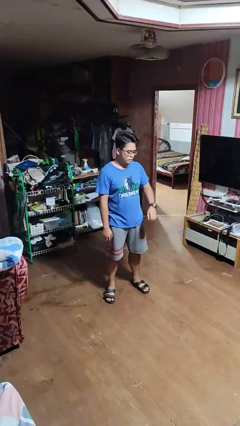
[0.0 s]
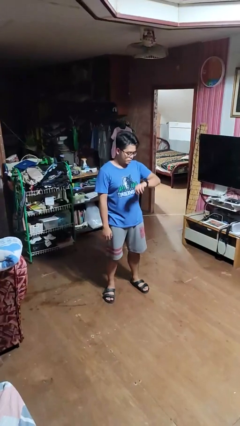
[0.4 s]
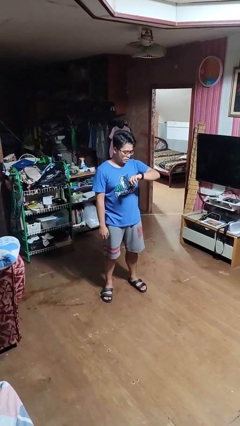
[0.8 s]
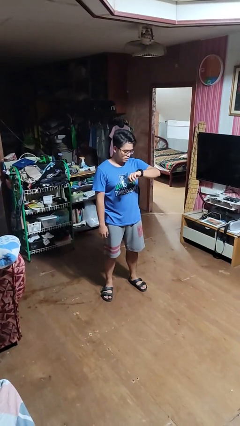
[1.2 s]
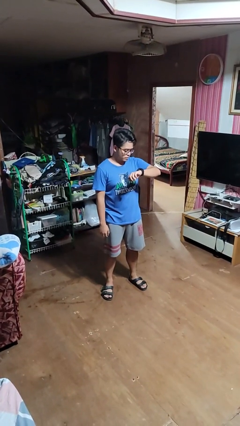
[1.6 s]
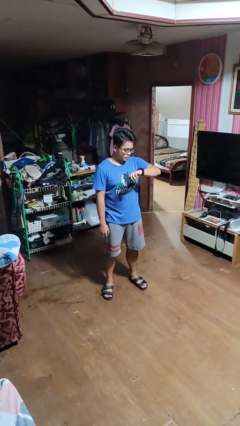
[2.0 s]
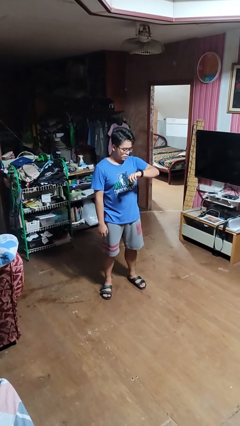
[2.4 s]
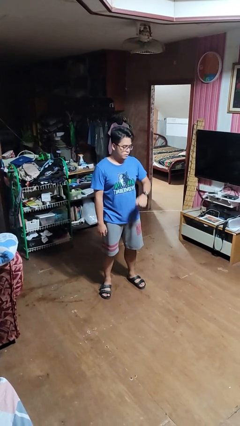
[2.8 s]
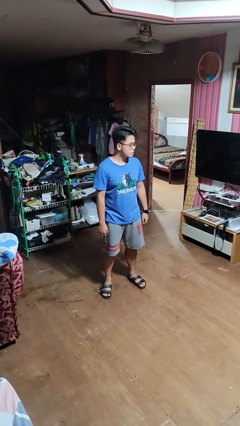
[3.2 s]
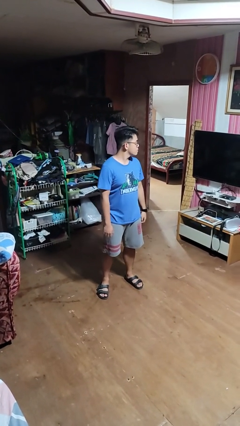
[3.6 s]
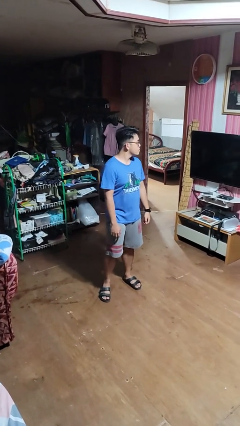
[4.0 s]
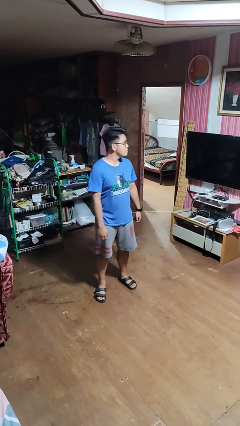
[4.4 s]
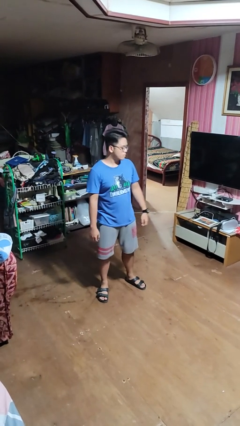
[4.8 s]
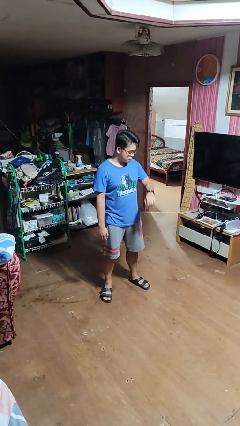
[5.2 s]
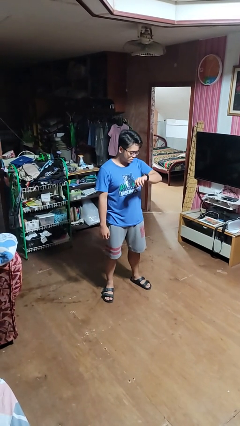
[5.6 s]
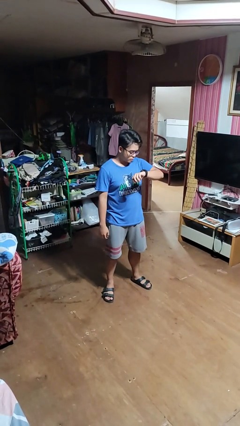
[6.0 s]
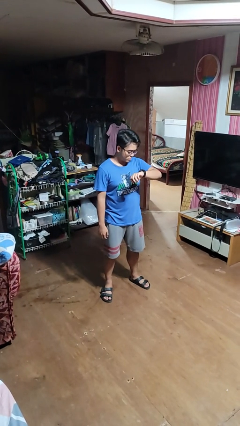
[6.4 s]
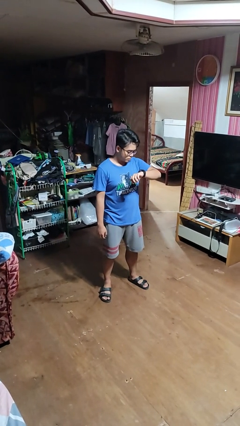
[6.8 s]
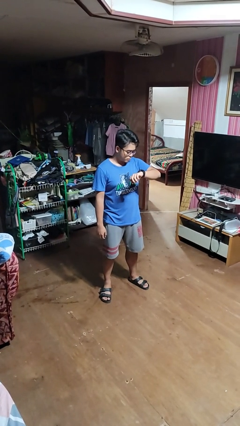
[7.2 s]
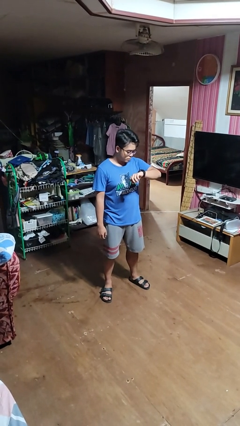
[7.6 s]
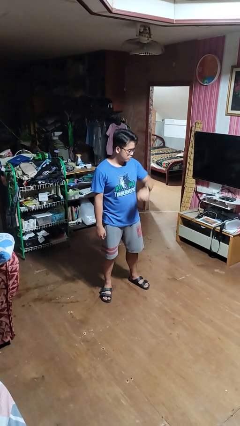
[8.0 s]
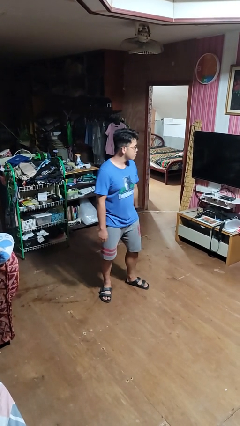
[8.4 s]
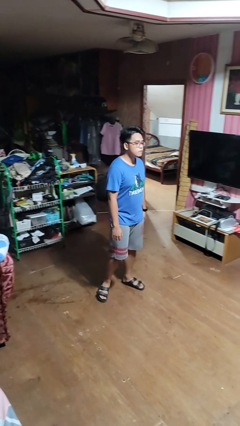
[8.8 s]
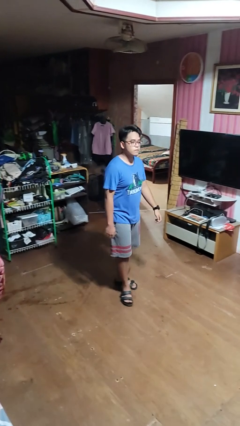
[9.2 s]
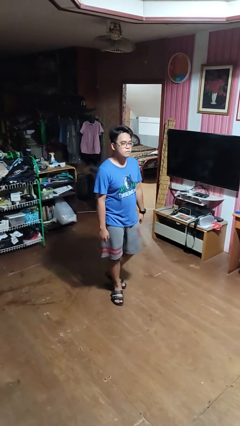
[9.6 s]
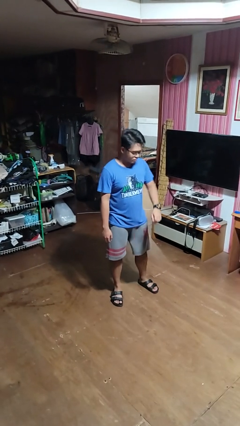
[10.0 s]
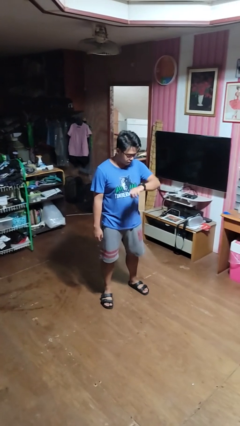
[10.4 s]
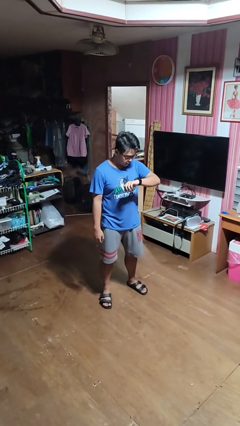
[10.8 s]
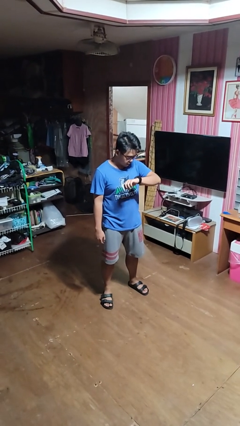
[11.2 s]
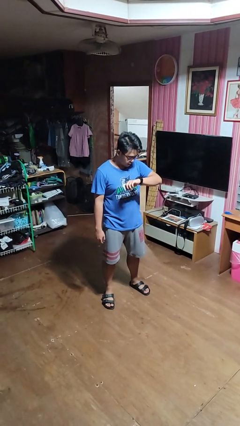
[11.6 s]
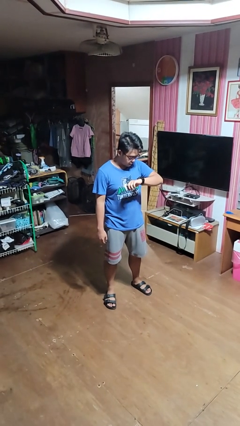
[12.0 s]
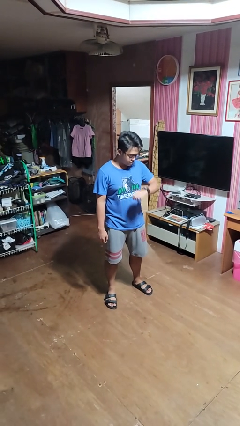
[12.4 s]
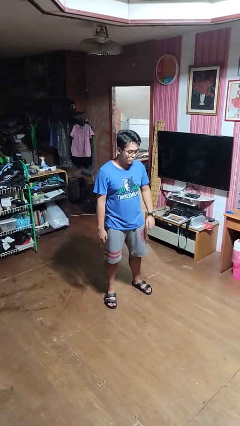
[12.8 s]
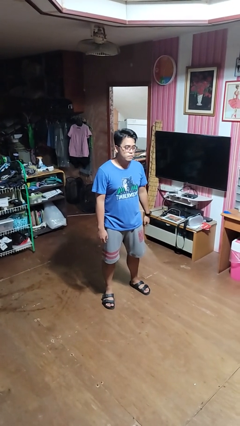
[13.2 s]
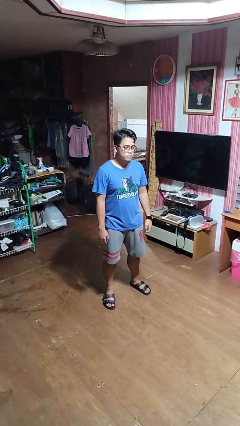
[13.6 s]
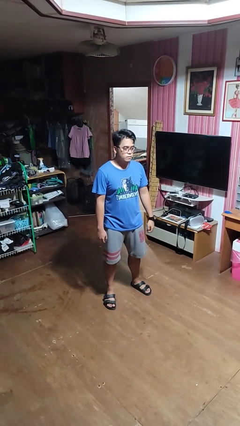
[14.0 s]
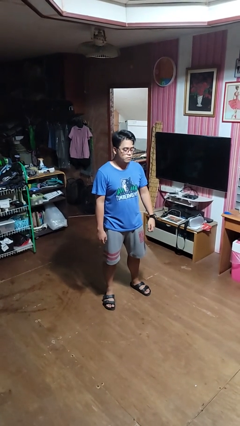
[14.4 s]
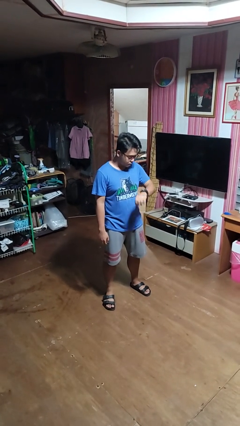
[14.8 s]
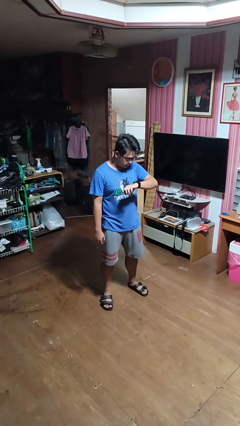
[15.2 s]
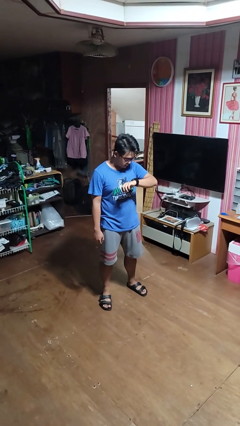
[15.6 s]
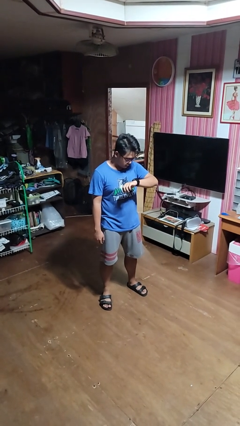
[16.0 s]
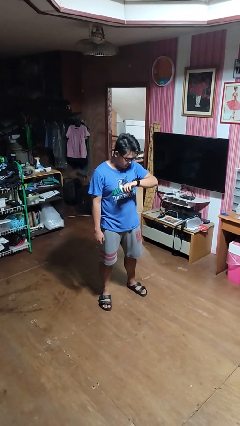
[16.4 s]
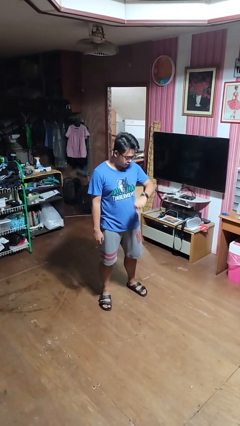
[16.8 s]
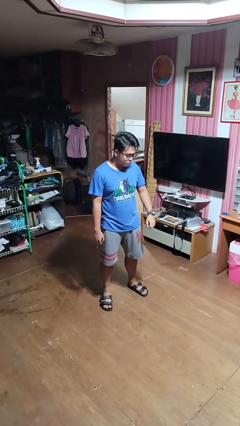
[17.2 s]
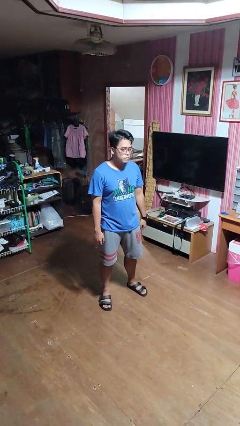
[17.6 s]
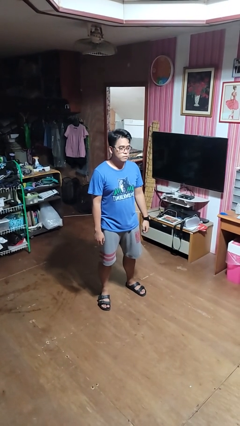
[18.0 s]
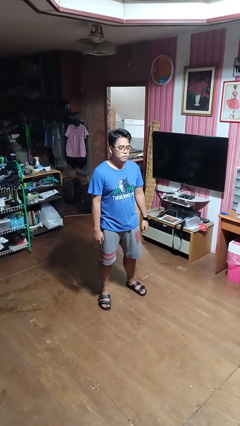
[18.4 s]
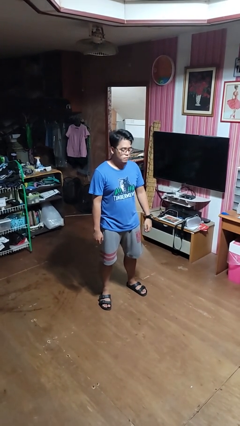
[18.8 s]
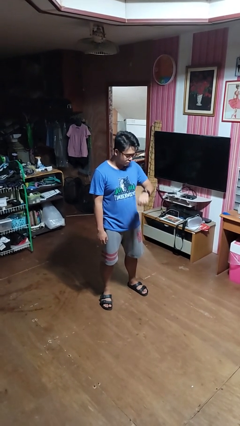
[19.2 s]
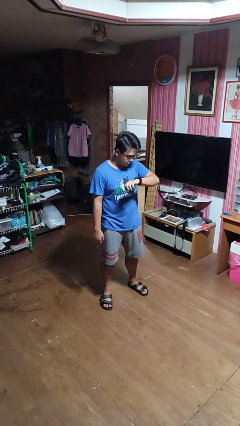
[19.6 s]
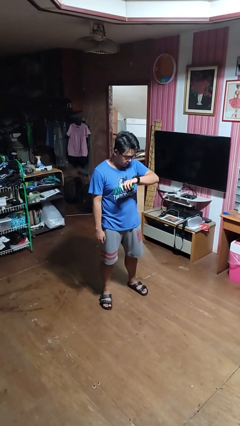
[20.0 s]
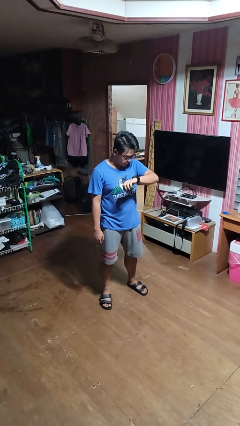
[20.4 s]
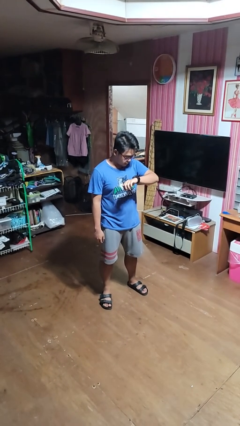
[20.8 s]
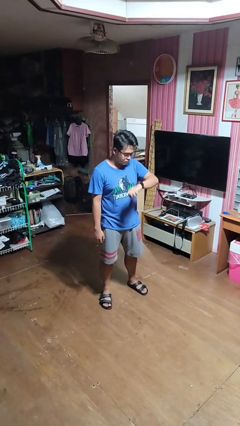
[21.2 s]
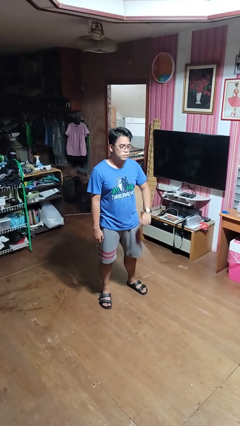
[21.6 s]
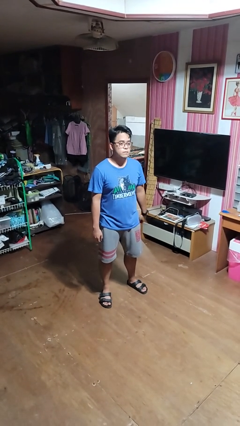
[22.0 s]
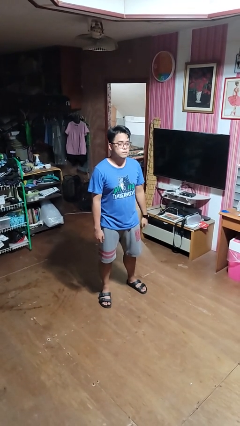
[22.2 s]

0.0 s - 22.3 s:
person looks at wristwatch

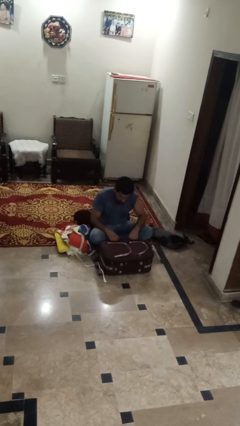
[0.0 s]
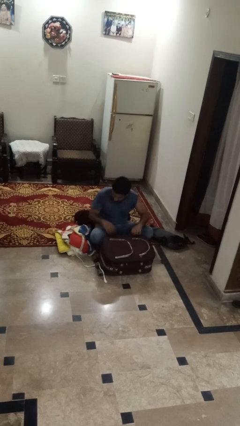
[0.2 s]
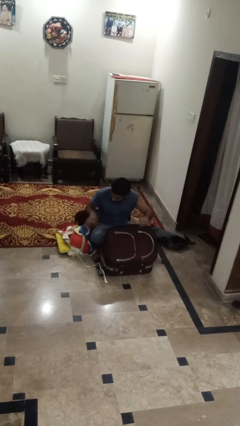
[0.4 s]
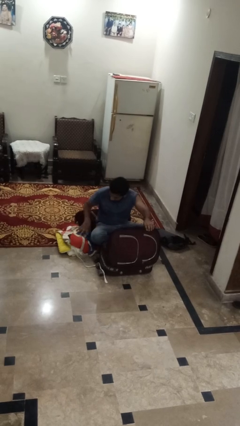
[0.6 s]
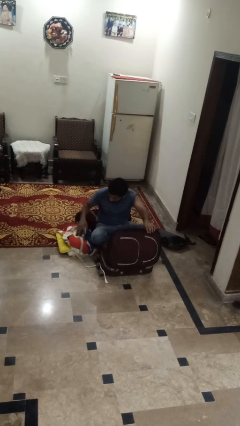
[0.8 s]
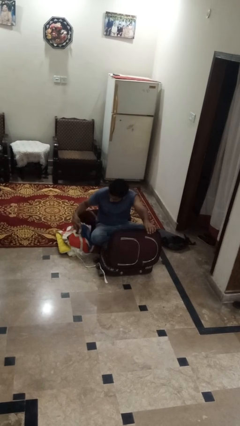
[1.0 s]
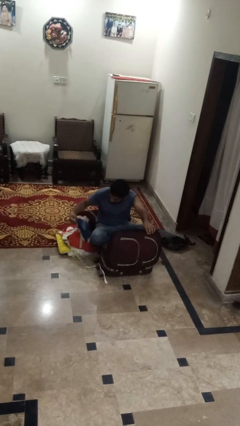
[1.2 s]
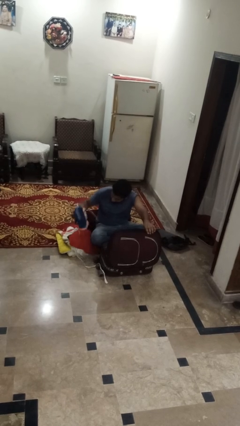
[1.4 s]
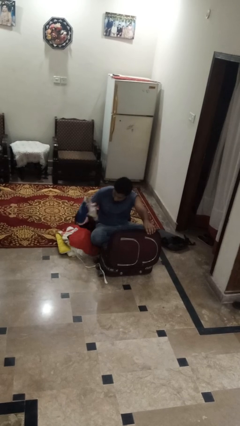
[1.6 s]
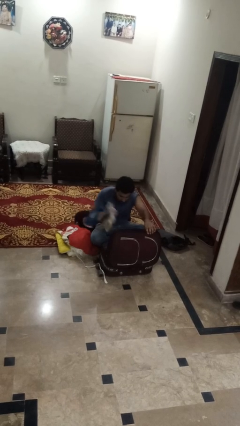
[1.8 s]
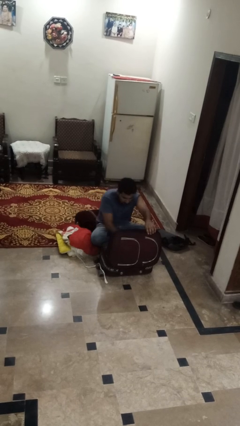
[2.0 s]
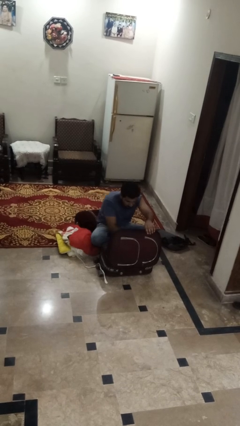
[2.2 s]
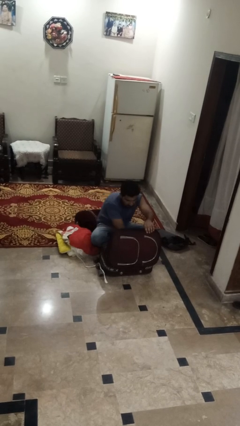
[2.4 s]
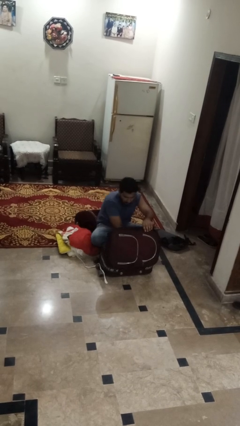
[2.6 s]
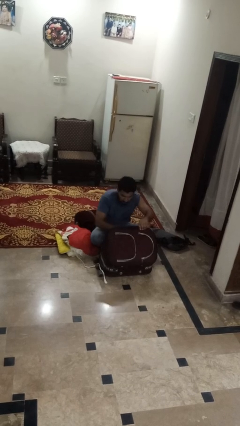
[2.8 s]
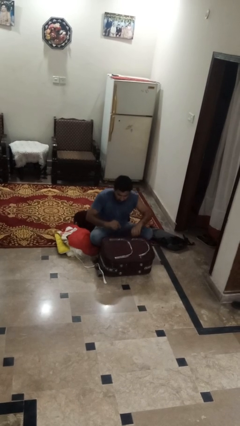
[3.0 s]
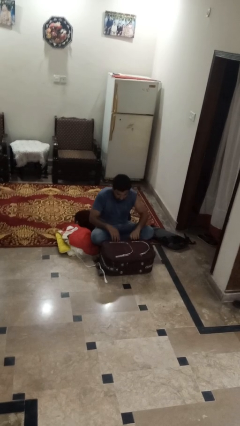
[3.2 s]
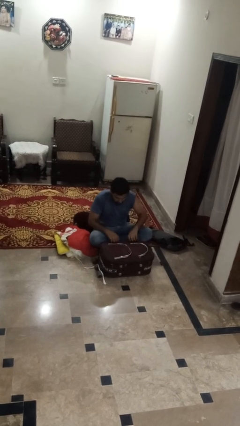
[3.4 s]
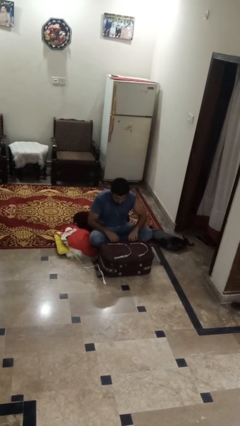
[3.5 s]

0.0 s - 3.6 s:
person loads clothes into suitcase

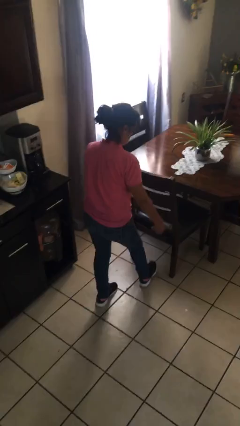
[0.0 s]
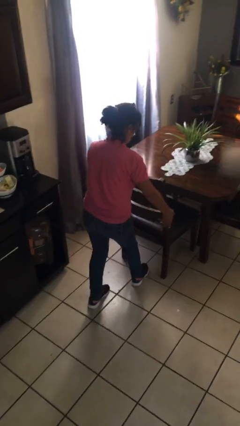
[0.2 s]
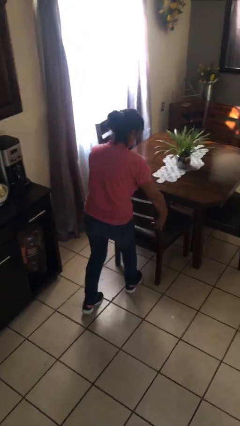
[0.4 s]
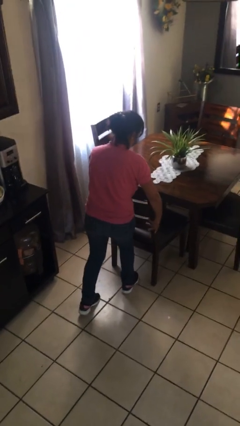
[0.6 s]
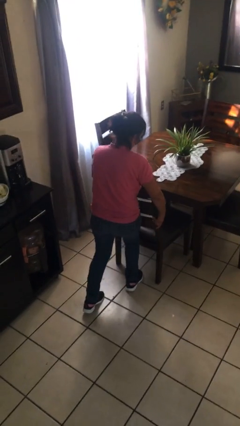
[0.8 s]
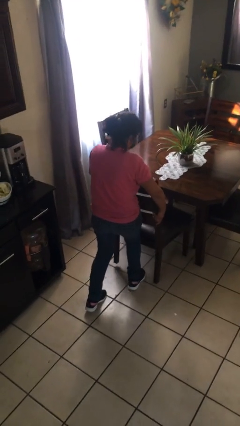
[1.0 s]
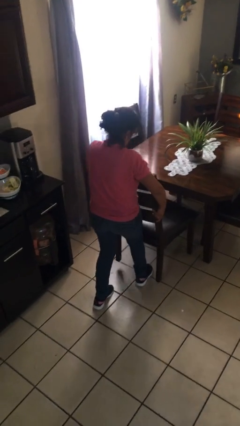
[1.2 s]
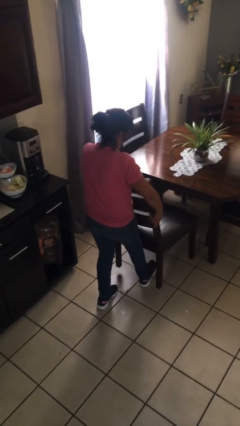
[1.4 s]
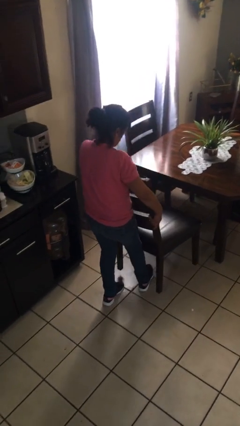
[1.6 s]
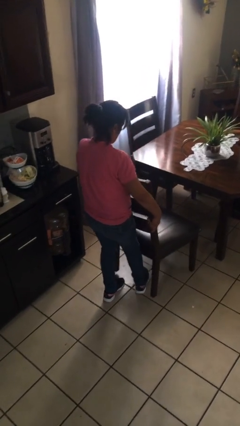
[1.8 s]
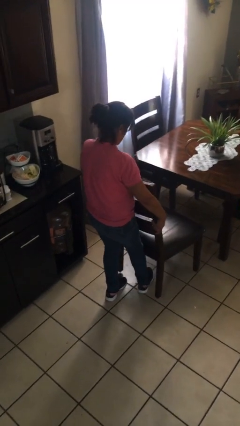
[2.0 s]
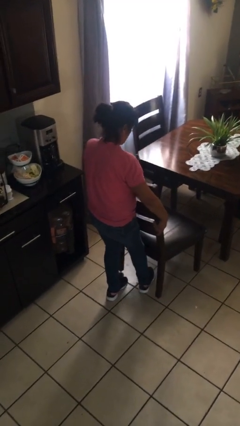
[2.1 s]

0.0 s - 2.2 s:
person pulls out chair

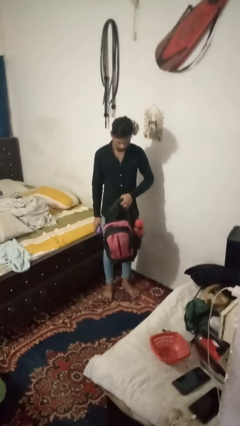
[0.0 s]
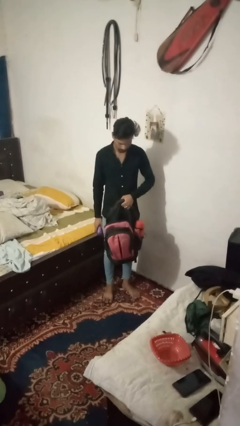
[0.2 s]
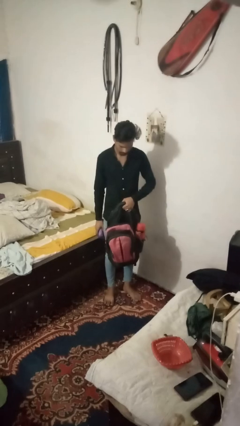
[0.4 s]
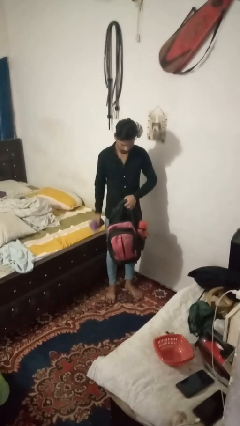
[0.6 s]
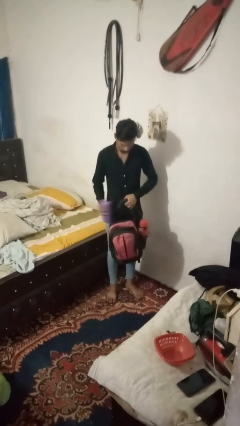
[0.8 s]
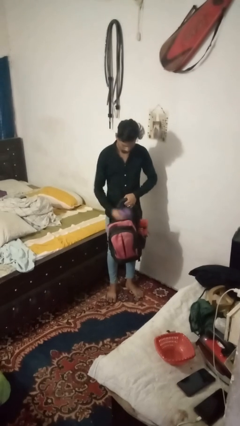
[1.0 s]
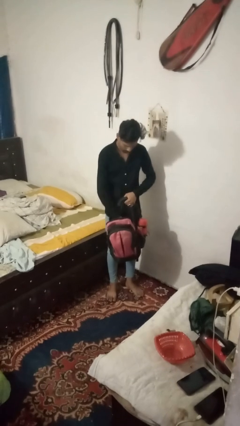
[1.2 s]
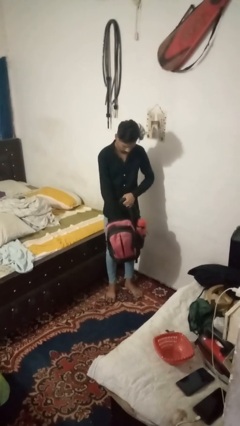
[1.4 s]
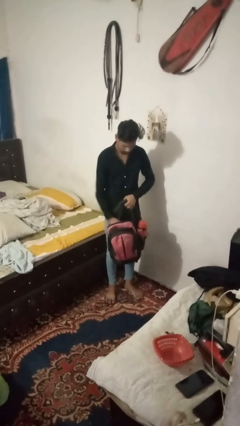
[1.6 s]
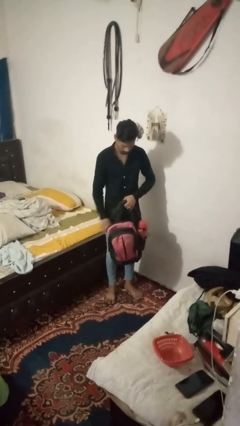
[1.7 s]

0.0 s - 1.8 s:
person puts object into bag
